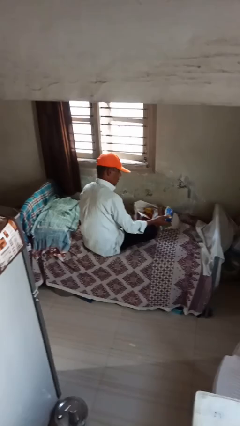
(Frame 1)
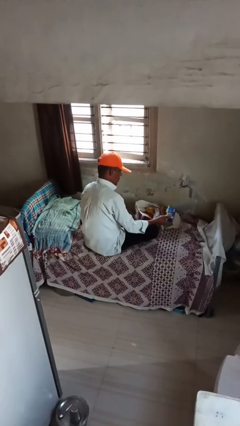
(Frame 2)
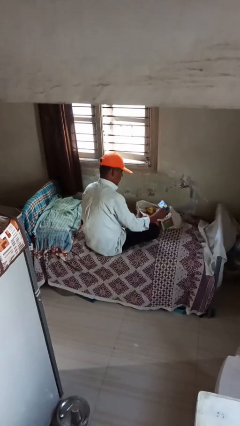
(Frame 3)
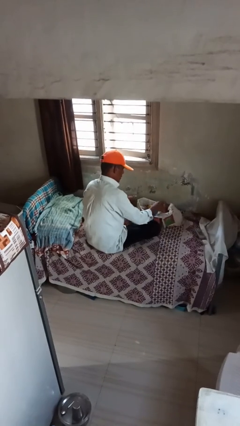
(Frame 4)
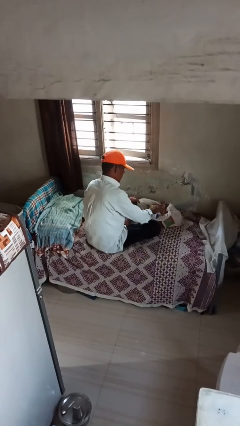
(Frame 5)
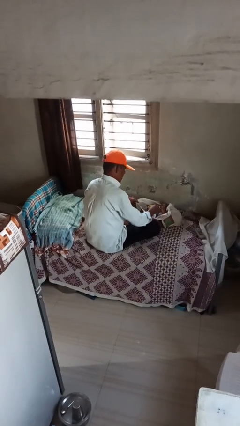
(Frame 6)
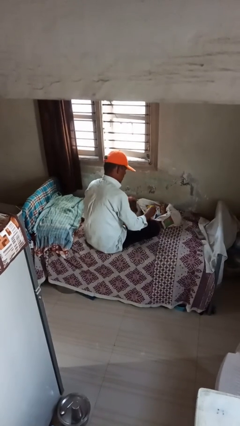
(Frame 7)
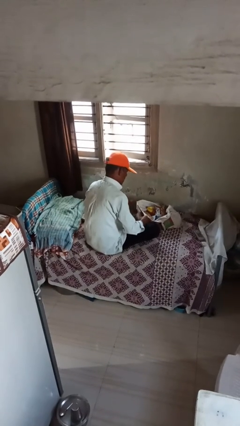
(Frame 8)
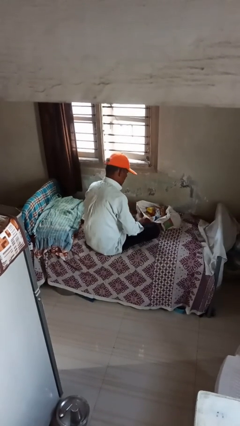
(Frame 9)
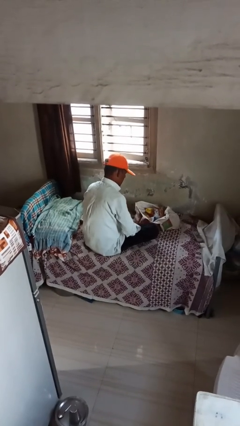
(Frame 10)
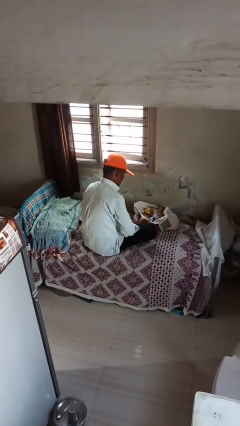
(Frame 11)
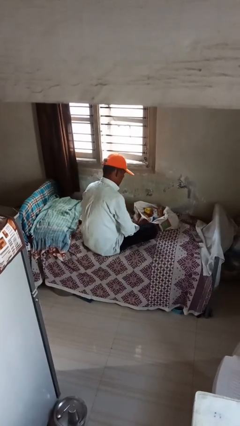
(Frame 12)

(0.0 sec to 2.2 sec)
person puts object into bag

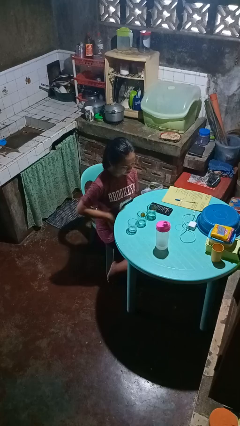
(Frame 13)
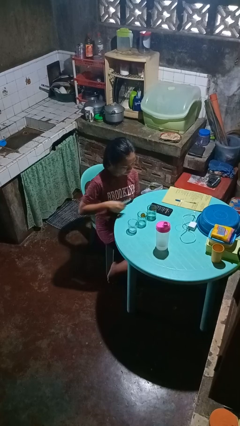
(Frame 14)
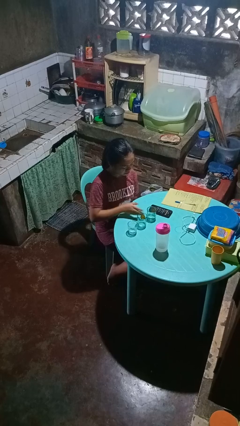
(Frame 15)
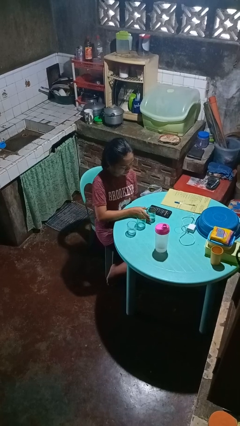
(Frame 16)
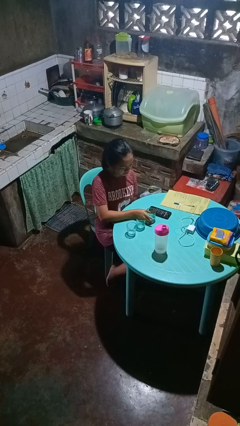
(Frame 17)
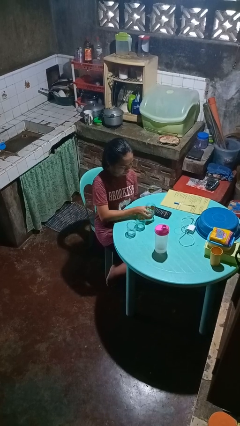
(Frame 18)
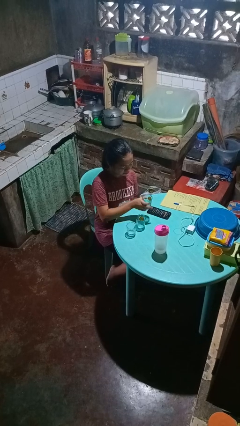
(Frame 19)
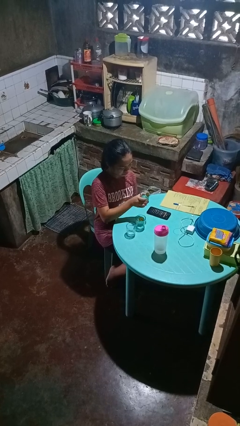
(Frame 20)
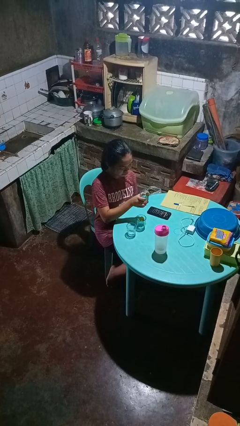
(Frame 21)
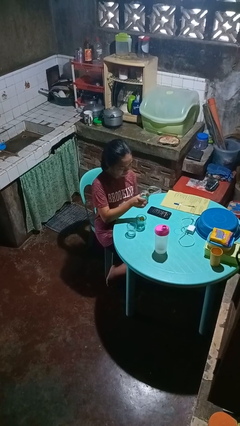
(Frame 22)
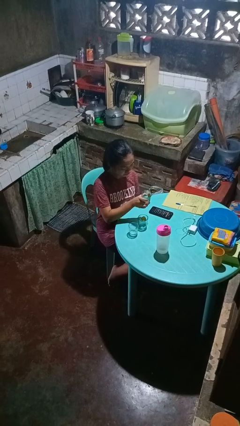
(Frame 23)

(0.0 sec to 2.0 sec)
person picks up object from table

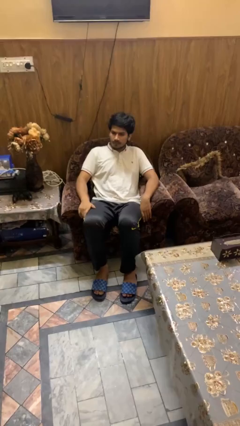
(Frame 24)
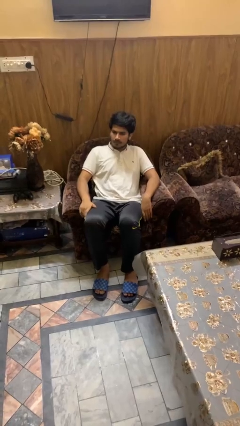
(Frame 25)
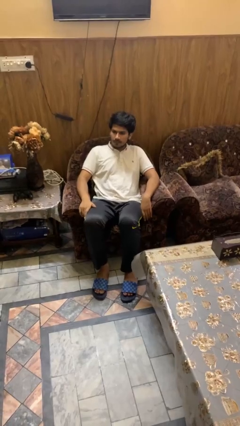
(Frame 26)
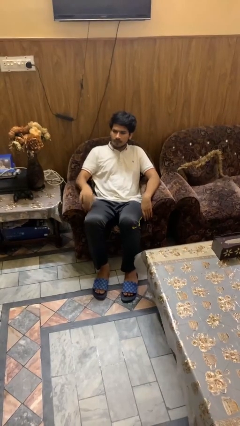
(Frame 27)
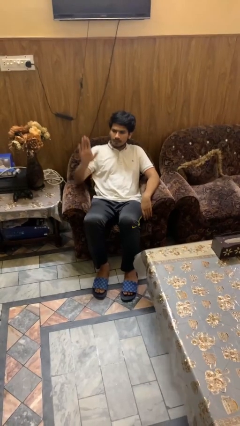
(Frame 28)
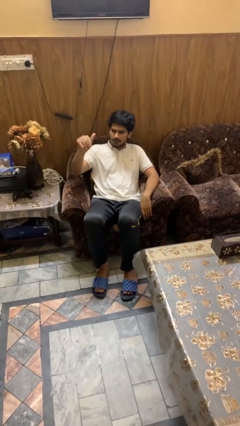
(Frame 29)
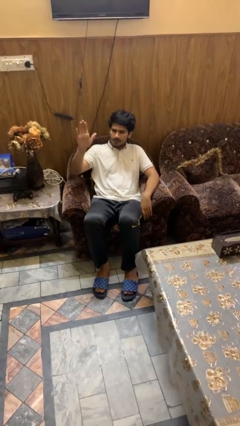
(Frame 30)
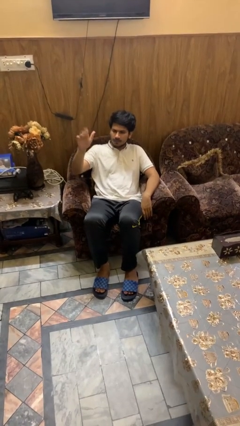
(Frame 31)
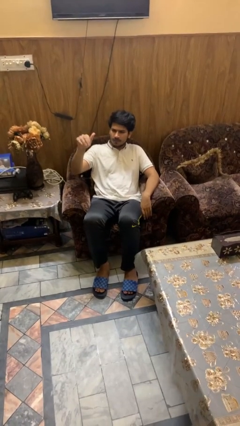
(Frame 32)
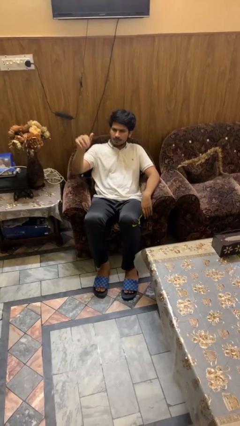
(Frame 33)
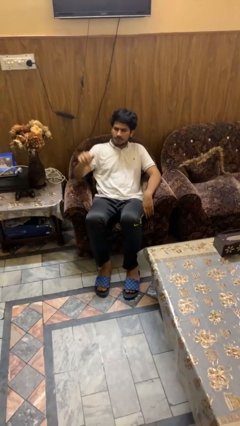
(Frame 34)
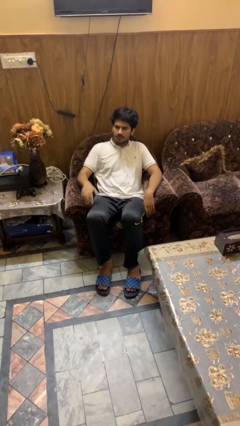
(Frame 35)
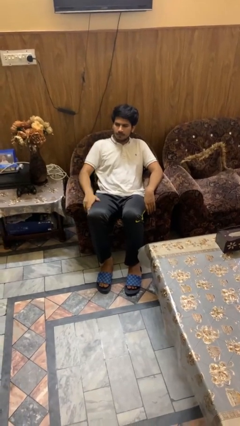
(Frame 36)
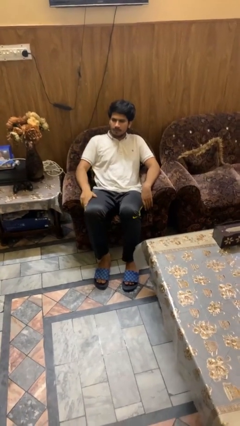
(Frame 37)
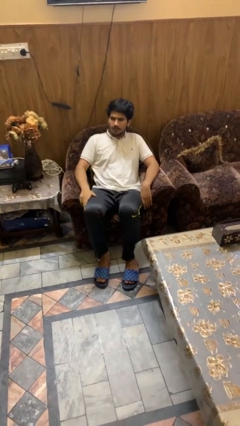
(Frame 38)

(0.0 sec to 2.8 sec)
person gestures come here

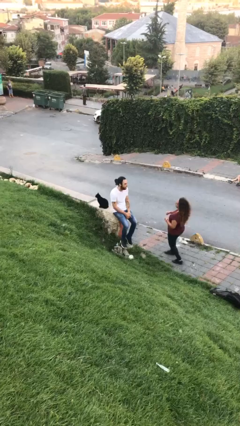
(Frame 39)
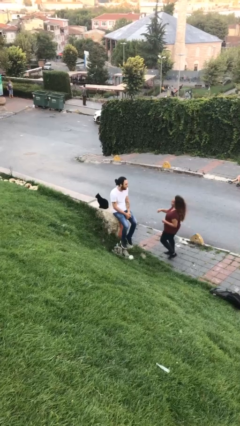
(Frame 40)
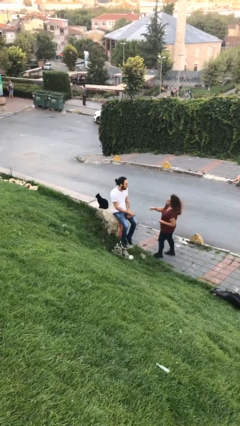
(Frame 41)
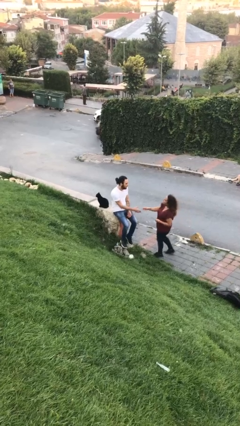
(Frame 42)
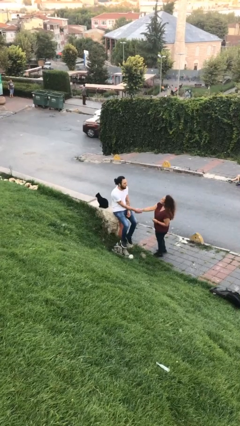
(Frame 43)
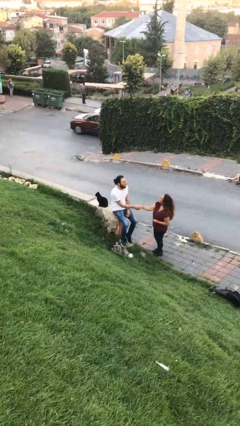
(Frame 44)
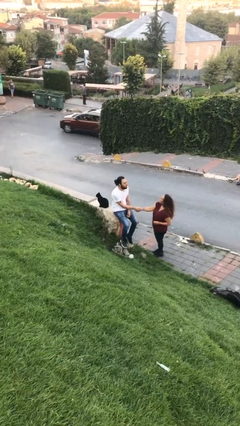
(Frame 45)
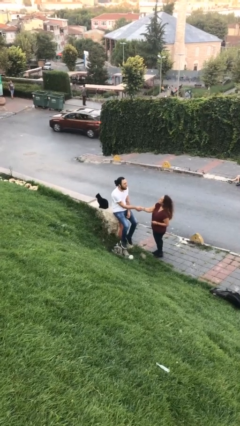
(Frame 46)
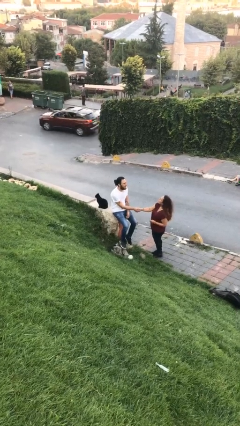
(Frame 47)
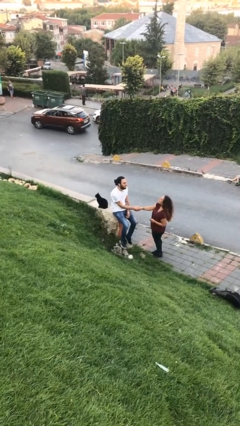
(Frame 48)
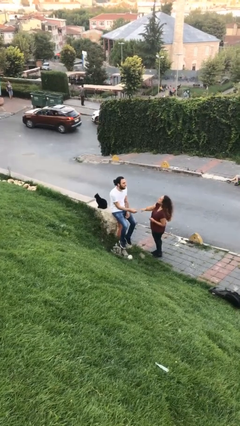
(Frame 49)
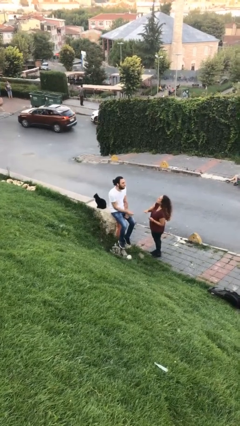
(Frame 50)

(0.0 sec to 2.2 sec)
person shakes hand

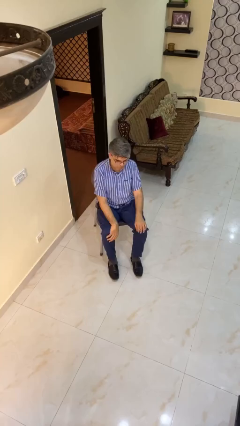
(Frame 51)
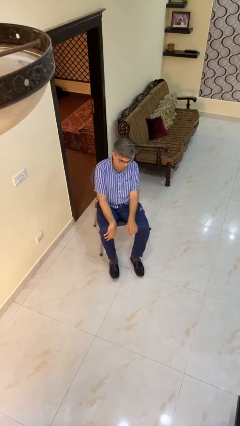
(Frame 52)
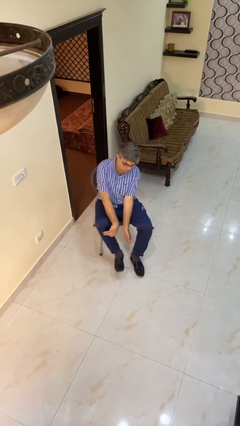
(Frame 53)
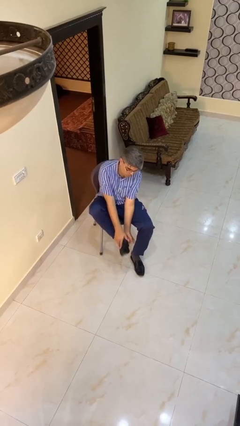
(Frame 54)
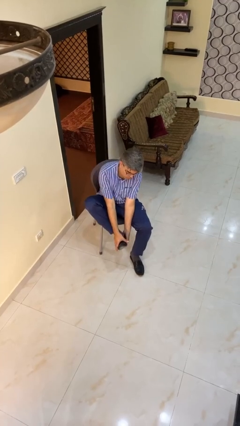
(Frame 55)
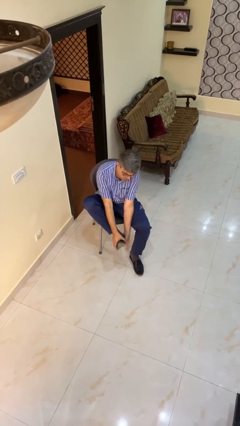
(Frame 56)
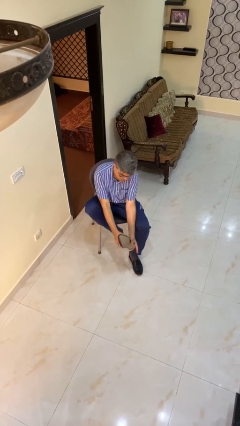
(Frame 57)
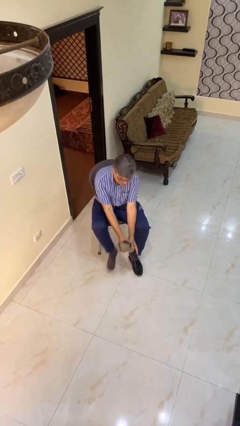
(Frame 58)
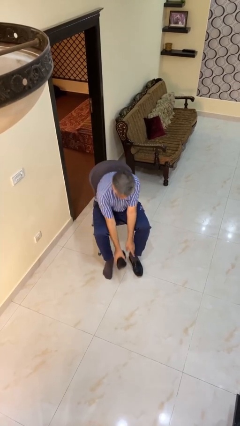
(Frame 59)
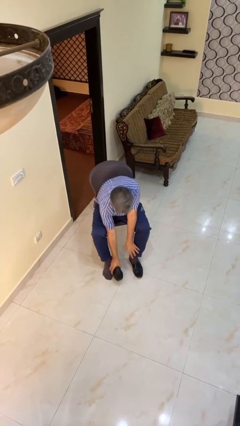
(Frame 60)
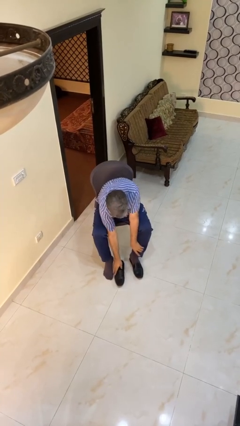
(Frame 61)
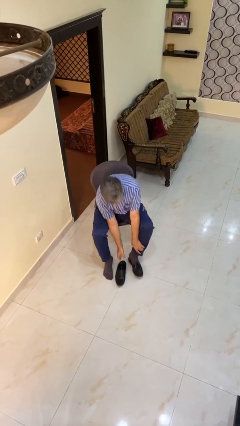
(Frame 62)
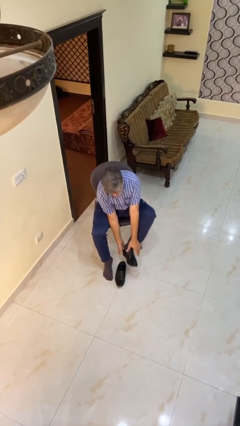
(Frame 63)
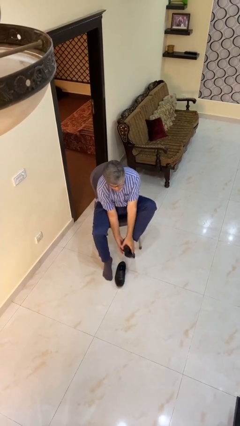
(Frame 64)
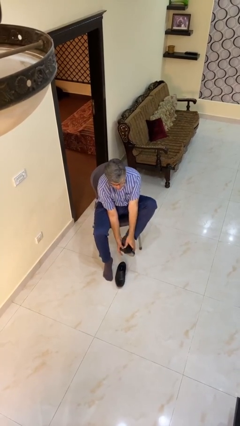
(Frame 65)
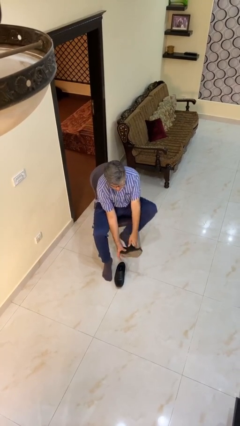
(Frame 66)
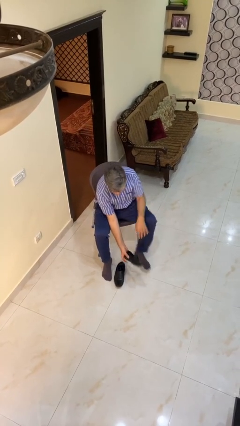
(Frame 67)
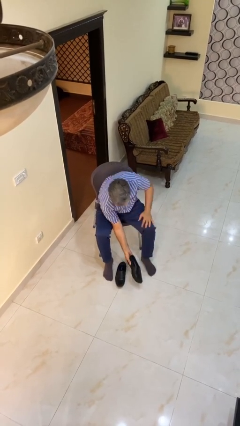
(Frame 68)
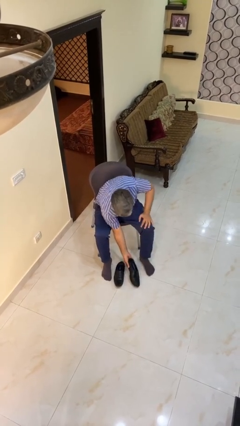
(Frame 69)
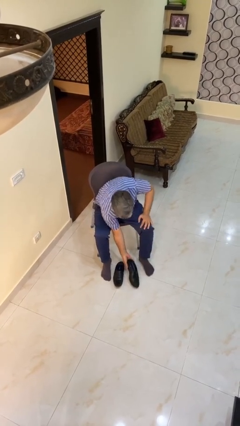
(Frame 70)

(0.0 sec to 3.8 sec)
person takes off boots

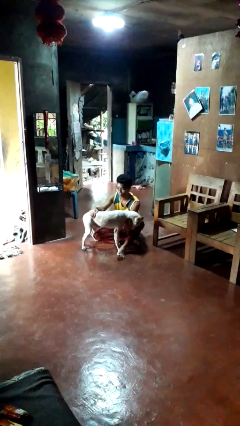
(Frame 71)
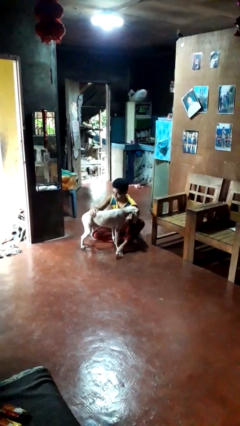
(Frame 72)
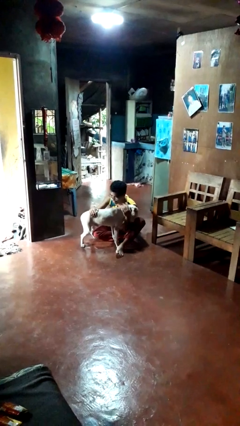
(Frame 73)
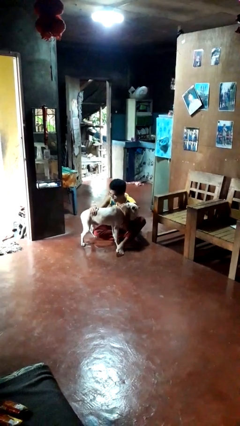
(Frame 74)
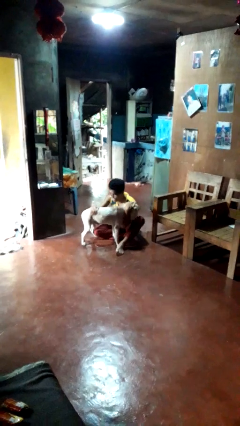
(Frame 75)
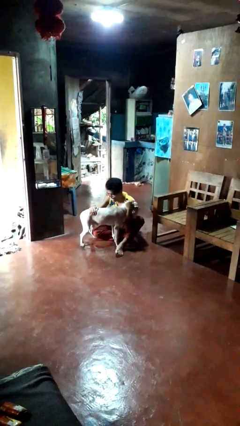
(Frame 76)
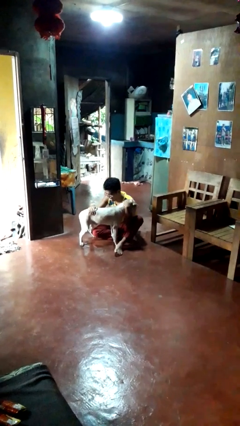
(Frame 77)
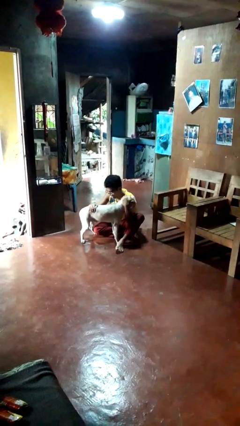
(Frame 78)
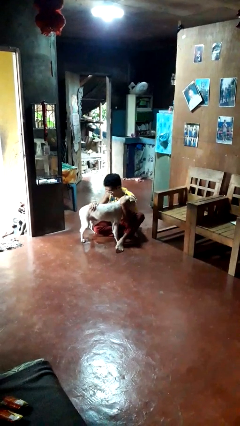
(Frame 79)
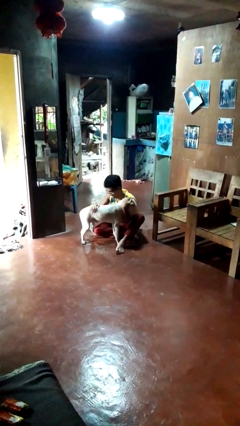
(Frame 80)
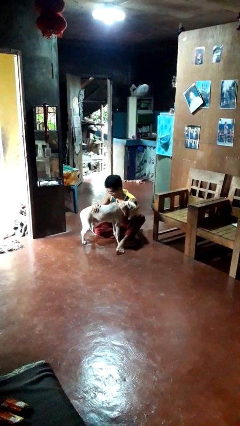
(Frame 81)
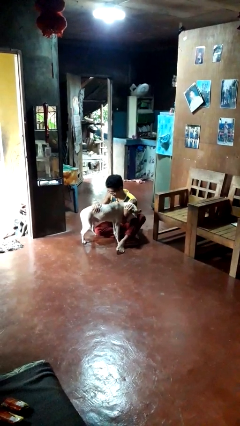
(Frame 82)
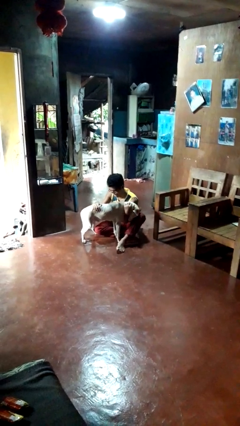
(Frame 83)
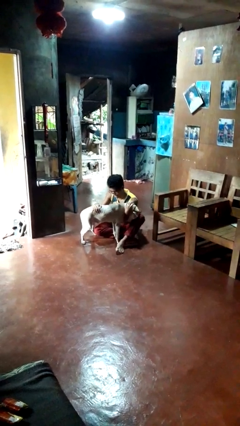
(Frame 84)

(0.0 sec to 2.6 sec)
person hugs dog

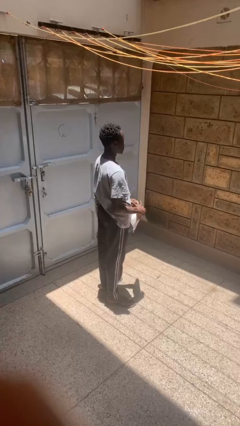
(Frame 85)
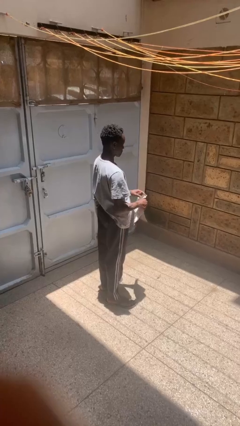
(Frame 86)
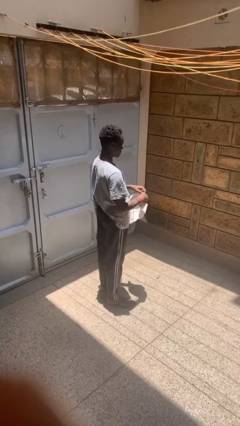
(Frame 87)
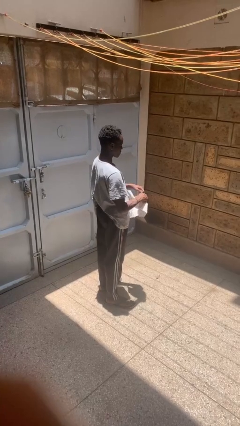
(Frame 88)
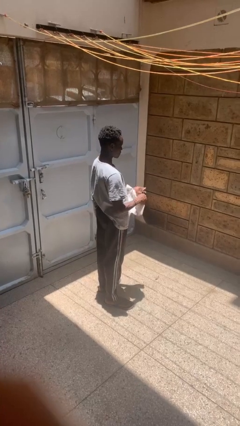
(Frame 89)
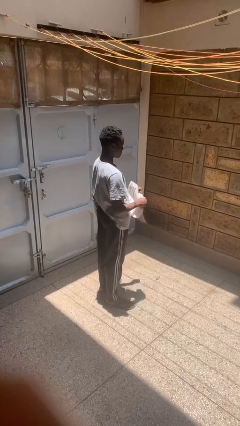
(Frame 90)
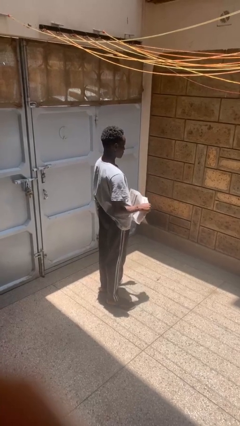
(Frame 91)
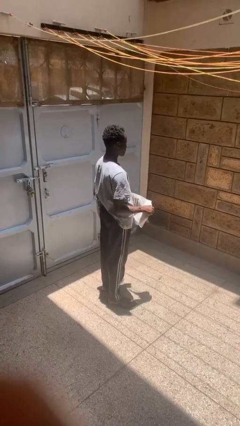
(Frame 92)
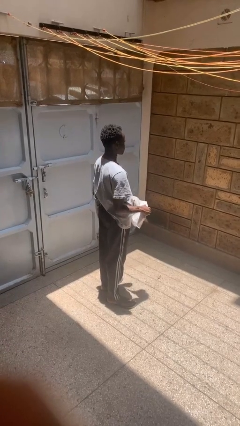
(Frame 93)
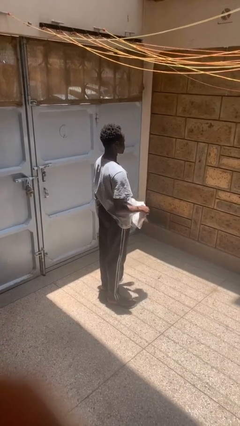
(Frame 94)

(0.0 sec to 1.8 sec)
person tears paper
